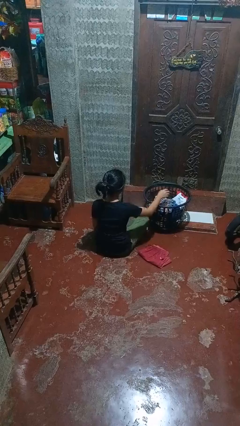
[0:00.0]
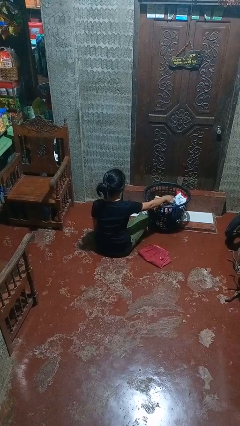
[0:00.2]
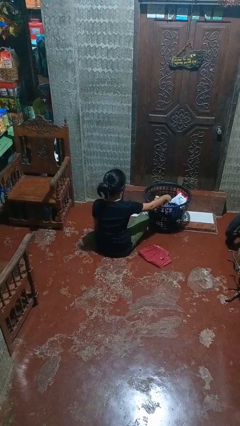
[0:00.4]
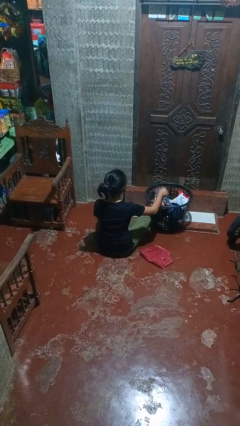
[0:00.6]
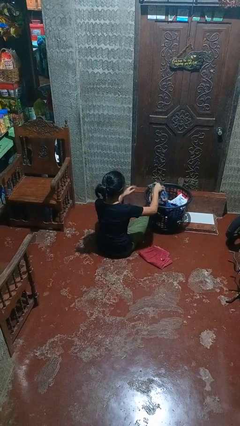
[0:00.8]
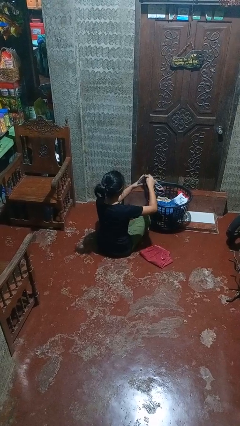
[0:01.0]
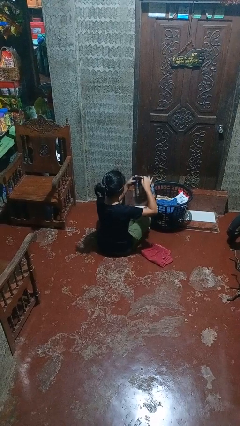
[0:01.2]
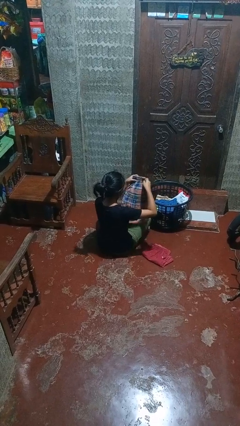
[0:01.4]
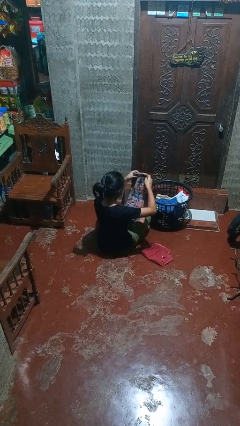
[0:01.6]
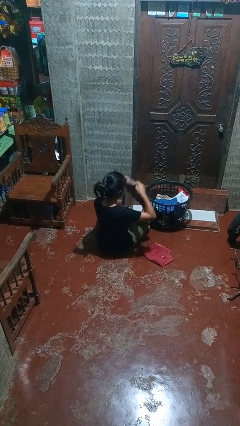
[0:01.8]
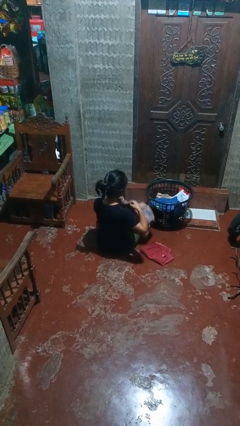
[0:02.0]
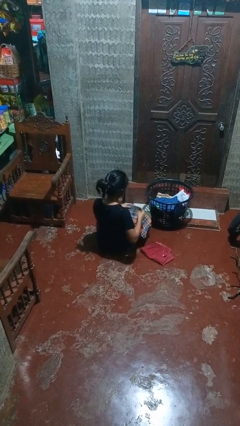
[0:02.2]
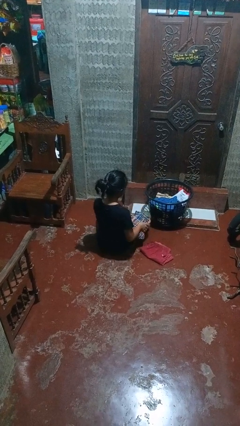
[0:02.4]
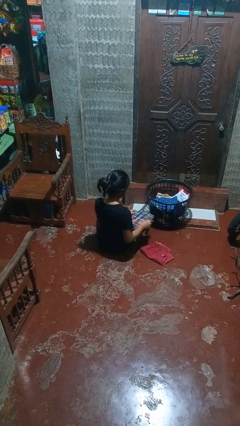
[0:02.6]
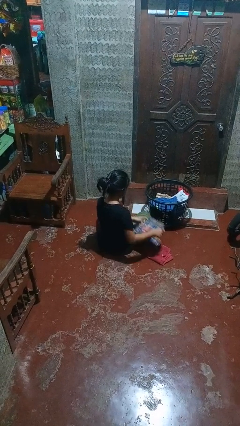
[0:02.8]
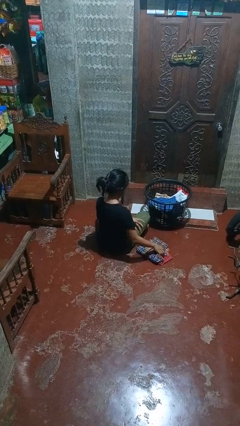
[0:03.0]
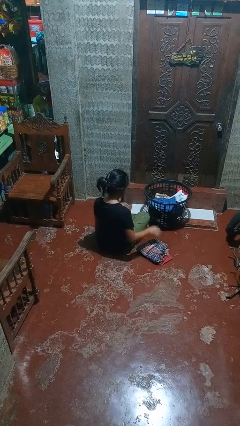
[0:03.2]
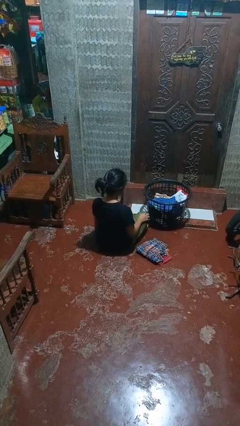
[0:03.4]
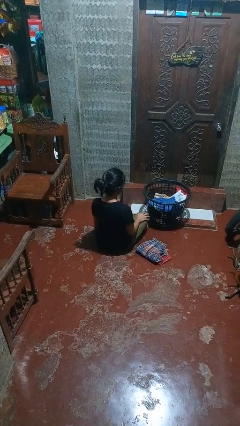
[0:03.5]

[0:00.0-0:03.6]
person folds pants

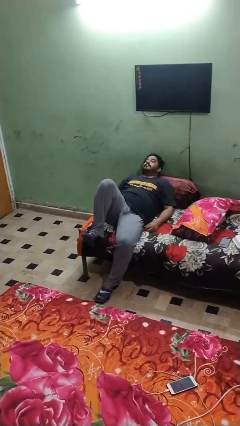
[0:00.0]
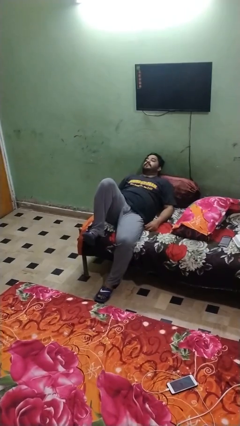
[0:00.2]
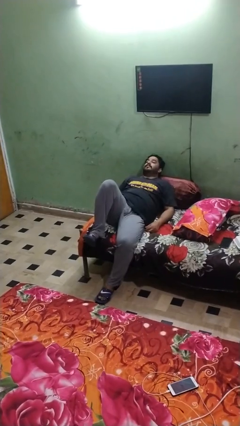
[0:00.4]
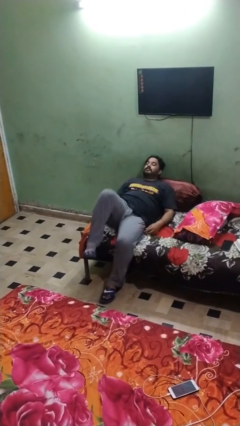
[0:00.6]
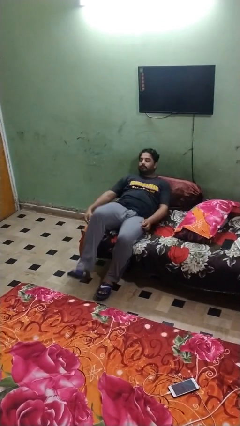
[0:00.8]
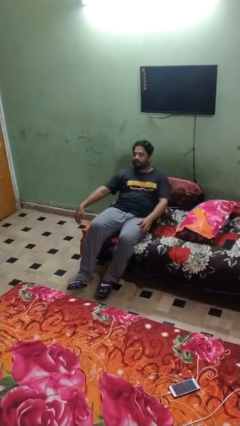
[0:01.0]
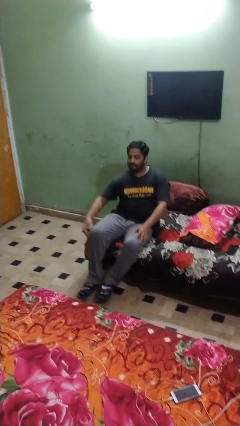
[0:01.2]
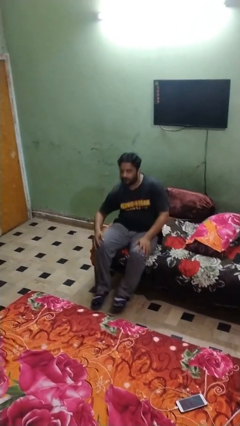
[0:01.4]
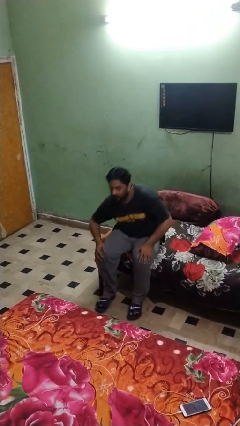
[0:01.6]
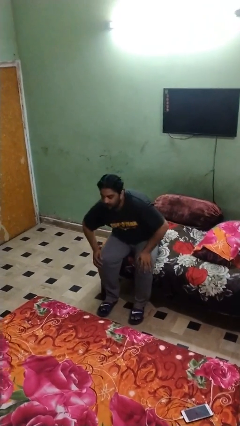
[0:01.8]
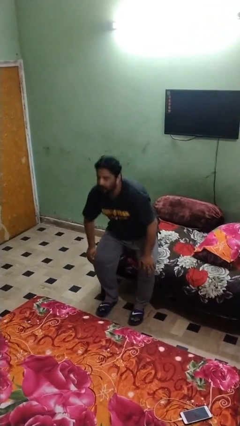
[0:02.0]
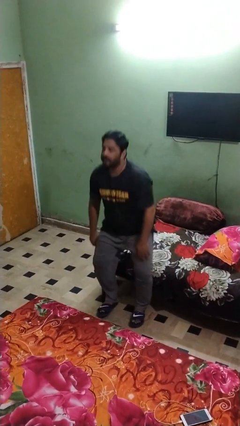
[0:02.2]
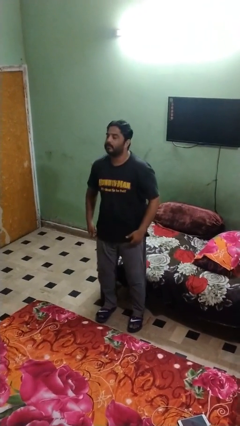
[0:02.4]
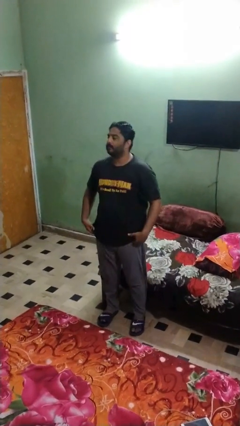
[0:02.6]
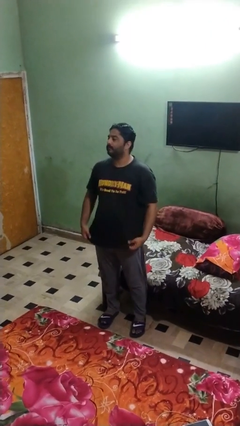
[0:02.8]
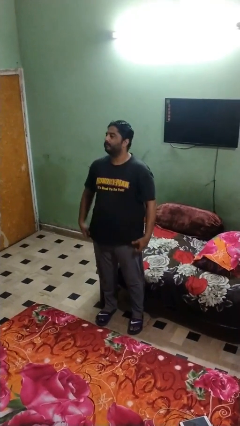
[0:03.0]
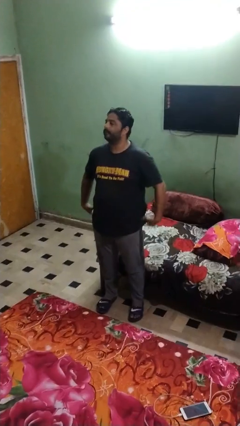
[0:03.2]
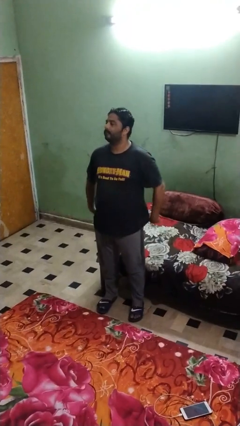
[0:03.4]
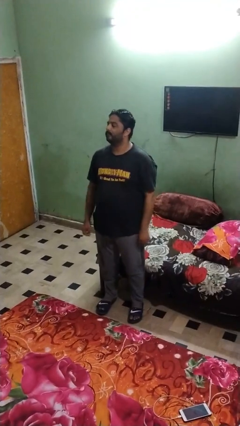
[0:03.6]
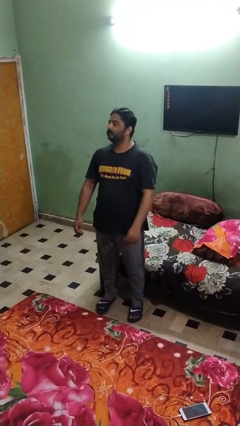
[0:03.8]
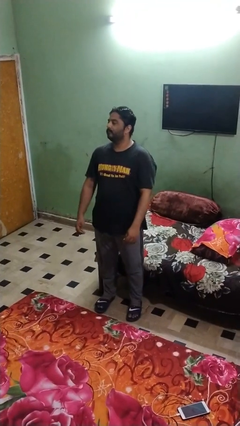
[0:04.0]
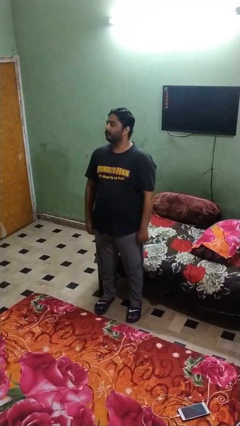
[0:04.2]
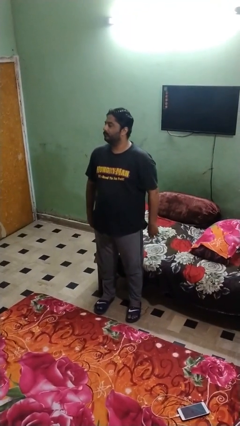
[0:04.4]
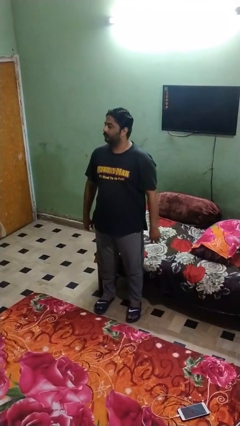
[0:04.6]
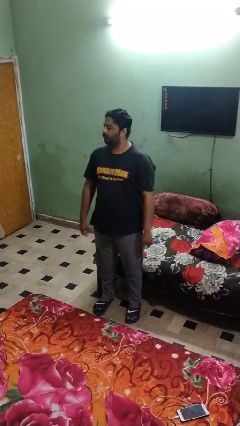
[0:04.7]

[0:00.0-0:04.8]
person stands up

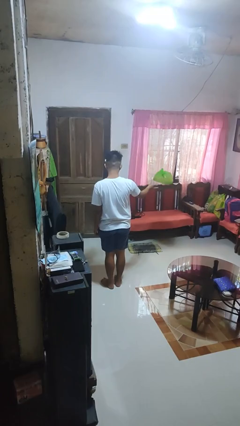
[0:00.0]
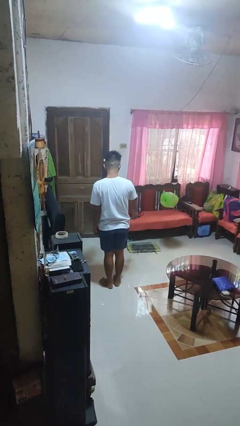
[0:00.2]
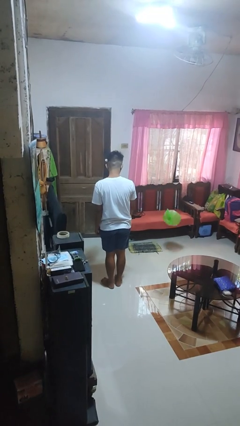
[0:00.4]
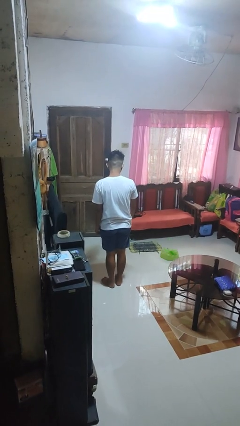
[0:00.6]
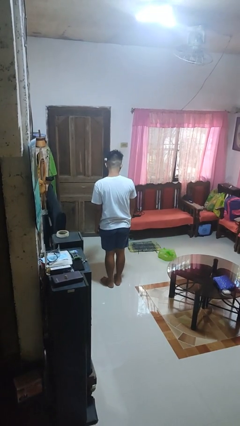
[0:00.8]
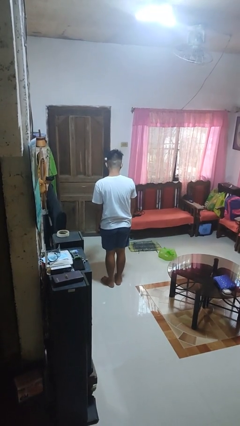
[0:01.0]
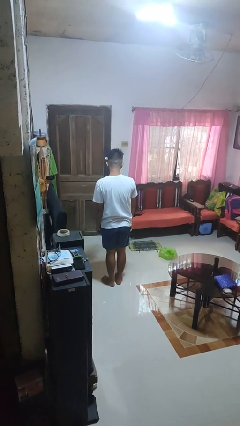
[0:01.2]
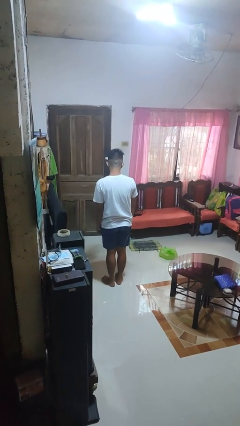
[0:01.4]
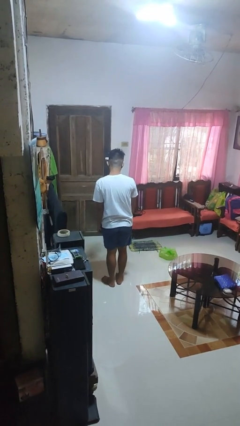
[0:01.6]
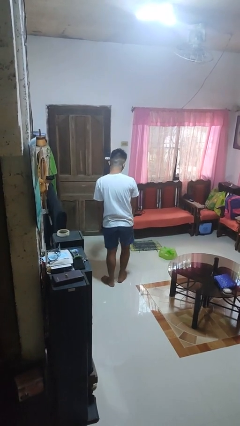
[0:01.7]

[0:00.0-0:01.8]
person throws object to ground

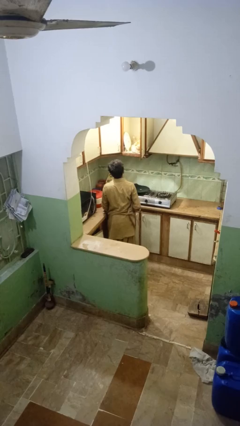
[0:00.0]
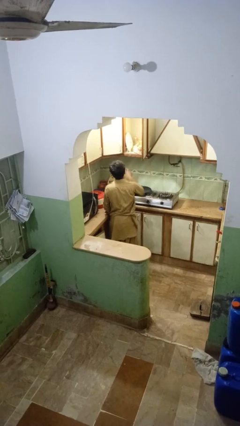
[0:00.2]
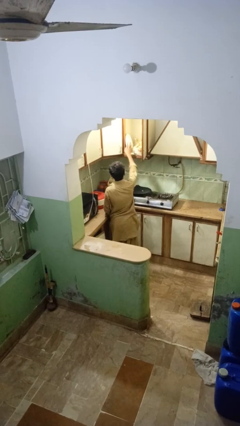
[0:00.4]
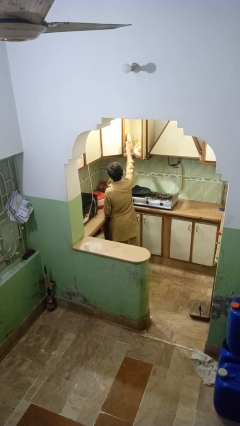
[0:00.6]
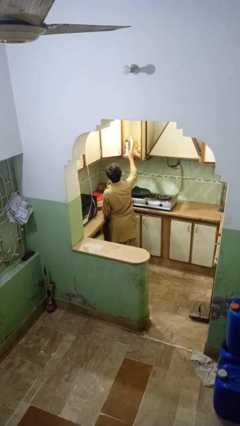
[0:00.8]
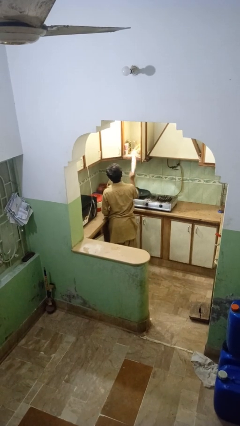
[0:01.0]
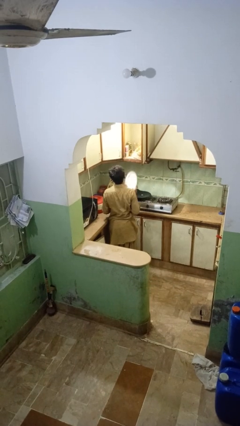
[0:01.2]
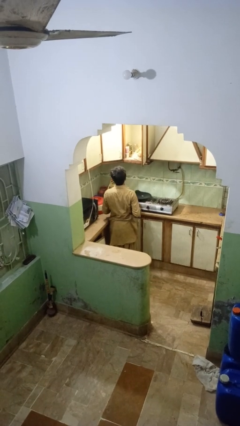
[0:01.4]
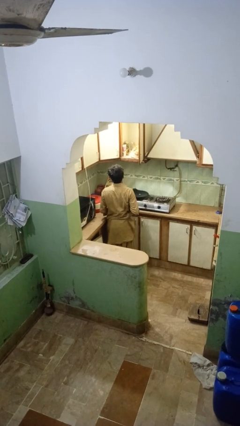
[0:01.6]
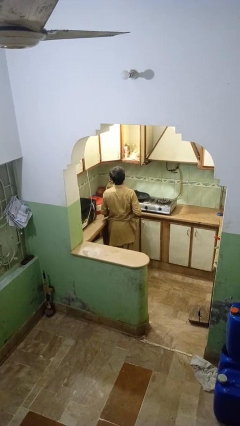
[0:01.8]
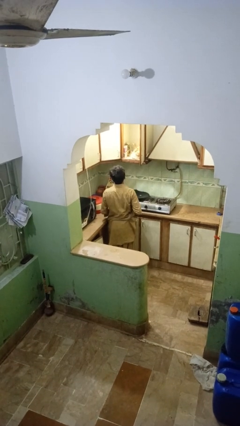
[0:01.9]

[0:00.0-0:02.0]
person takes object from cabinet

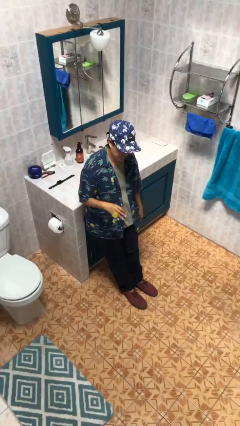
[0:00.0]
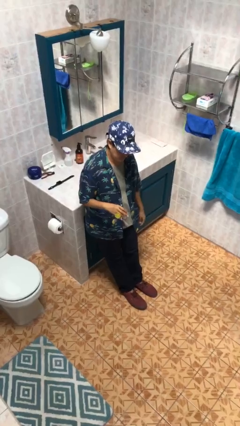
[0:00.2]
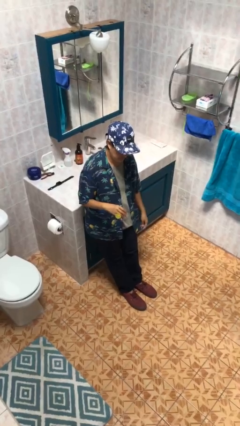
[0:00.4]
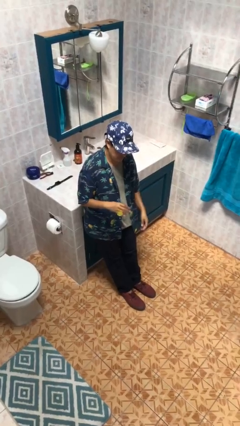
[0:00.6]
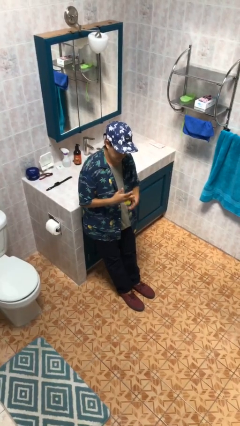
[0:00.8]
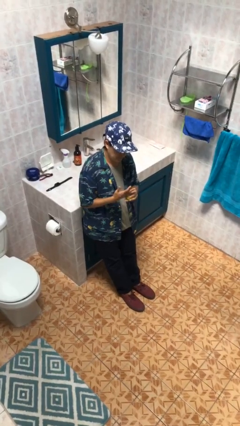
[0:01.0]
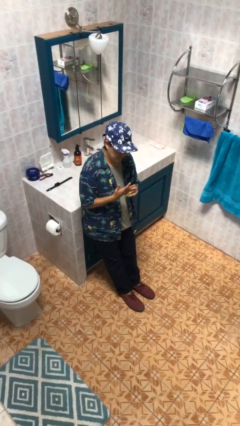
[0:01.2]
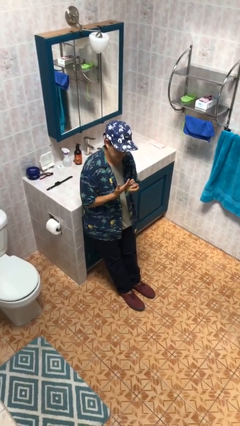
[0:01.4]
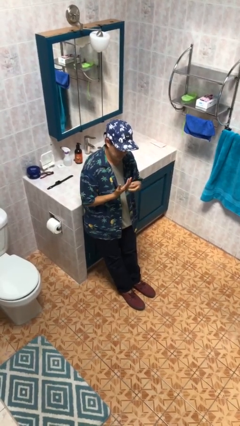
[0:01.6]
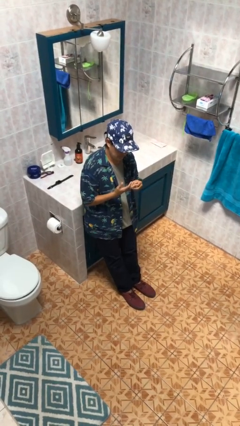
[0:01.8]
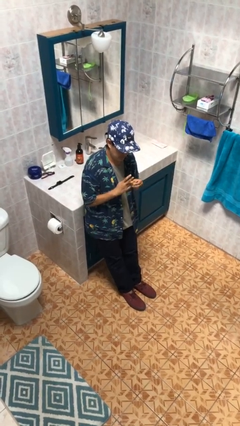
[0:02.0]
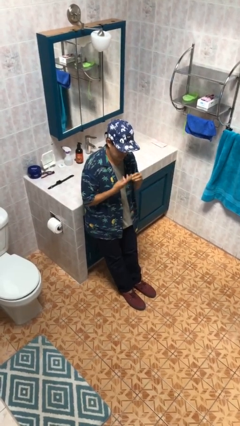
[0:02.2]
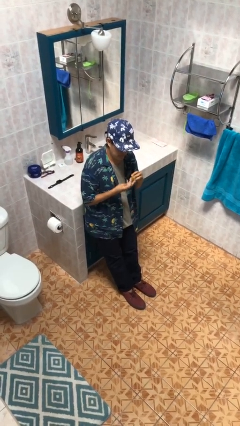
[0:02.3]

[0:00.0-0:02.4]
person takes off ring

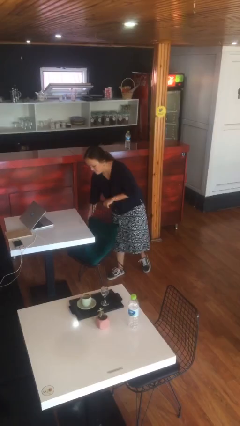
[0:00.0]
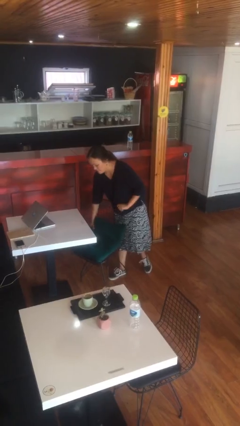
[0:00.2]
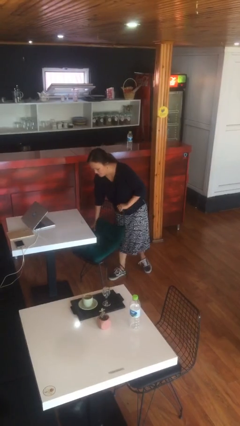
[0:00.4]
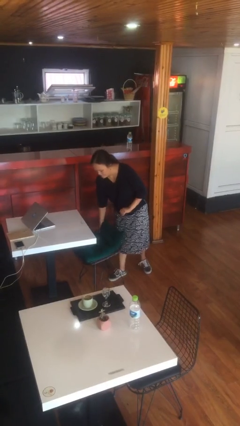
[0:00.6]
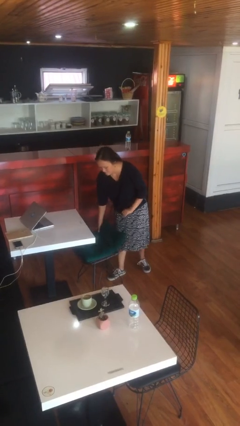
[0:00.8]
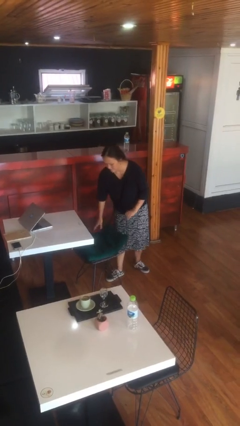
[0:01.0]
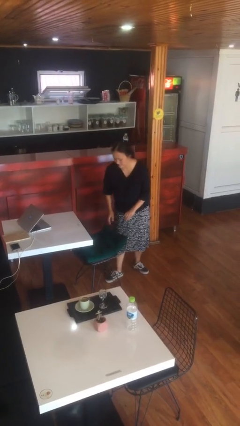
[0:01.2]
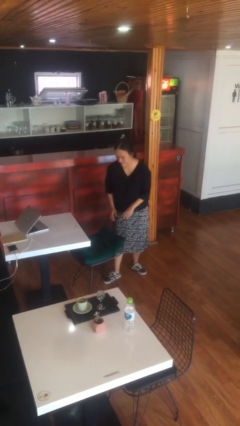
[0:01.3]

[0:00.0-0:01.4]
person puts down object on floor

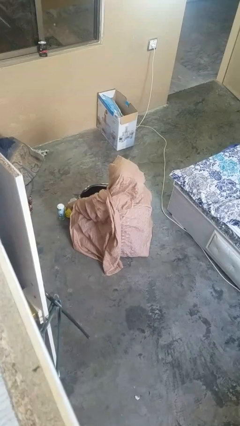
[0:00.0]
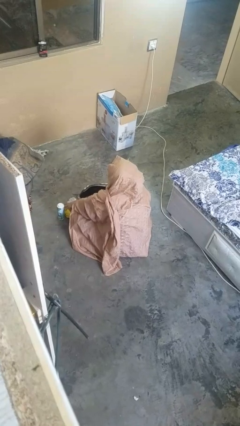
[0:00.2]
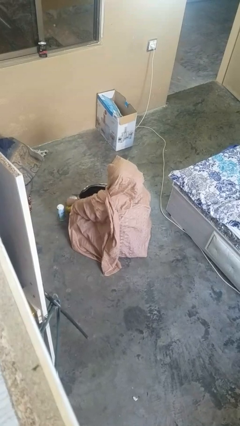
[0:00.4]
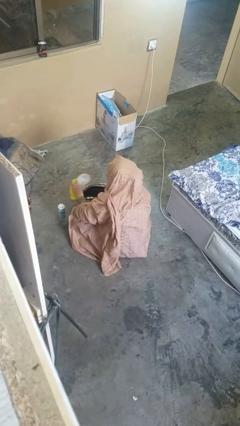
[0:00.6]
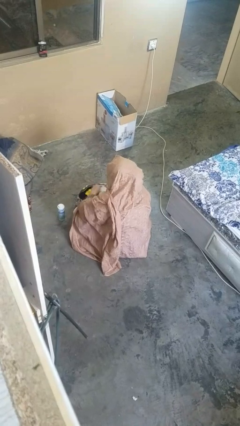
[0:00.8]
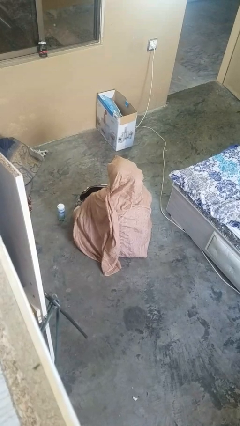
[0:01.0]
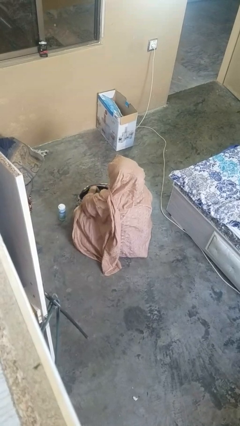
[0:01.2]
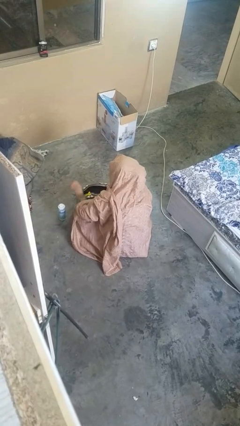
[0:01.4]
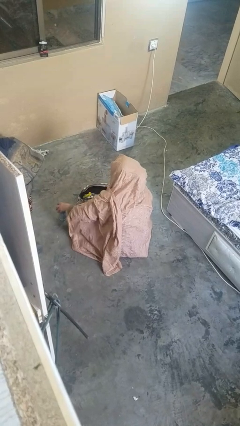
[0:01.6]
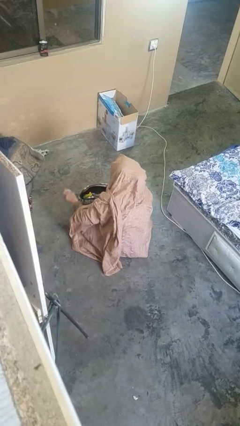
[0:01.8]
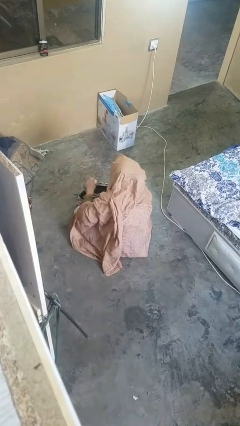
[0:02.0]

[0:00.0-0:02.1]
person puts object into purse
